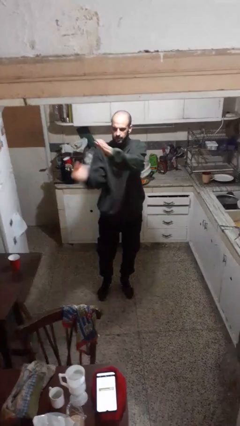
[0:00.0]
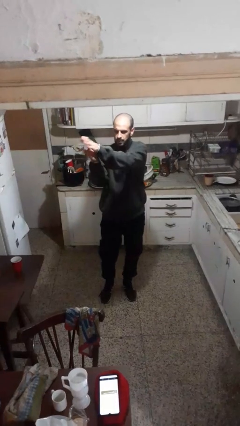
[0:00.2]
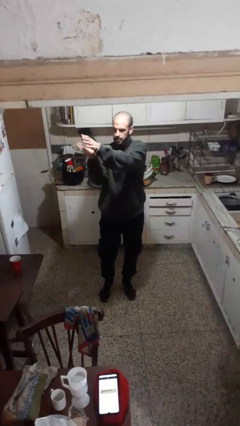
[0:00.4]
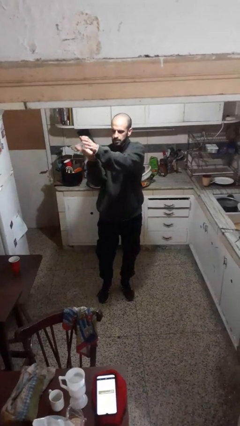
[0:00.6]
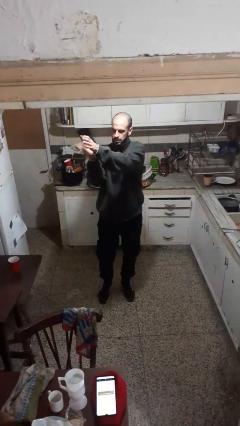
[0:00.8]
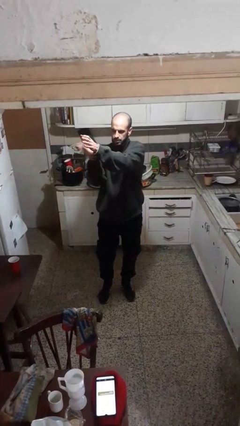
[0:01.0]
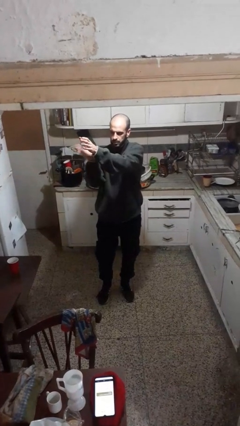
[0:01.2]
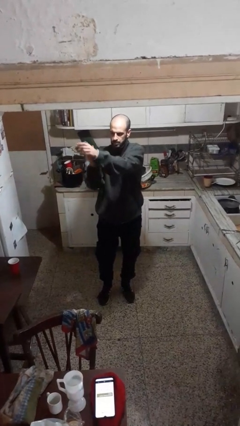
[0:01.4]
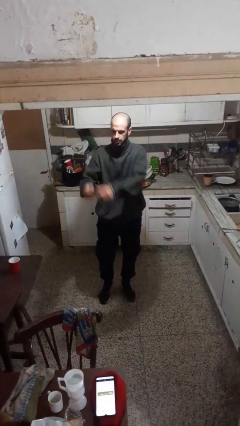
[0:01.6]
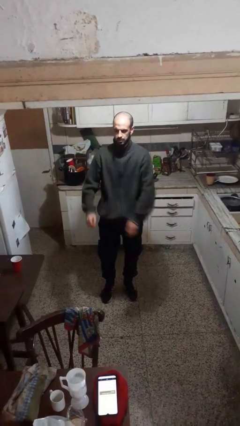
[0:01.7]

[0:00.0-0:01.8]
person claps hands

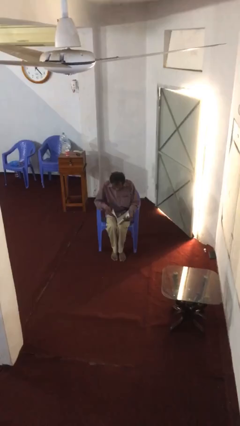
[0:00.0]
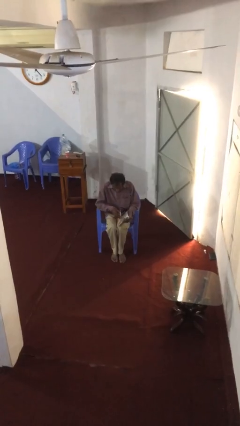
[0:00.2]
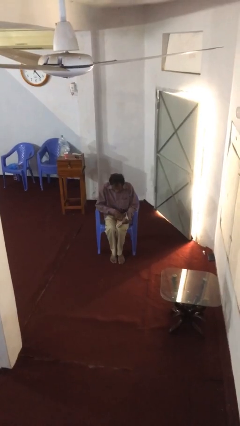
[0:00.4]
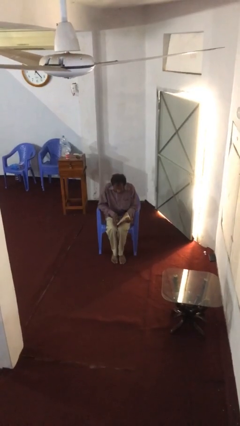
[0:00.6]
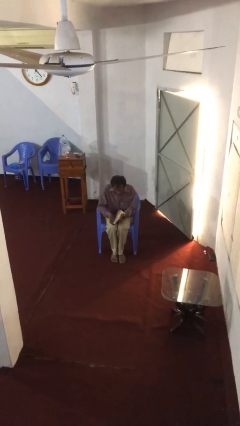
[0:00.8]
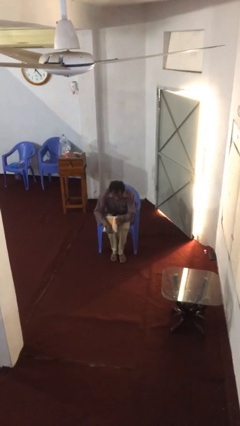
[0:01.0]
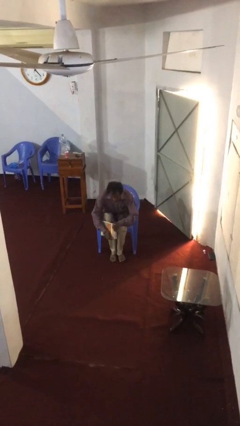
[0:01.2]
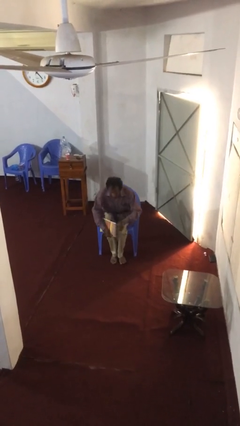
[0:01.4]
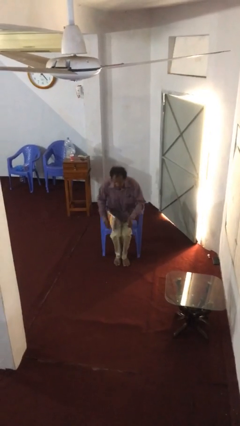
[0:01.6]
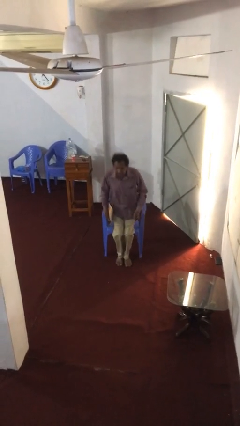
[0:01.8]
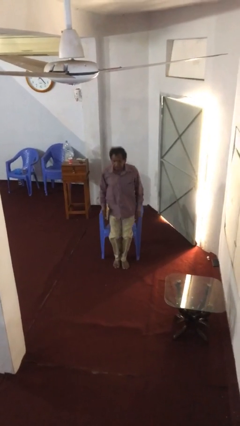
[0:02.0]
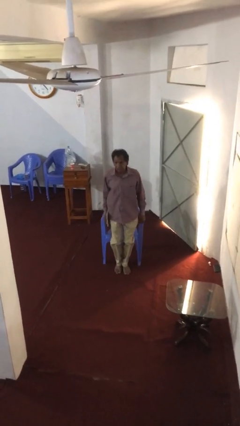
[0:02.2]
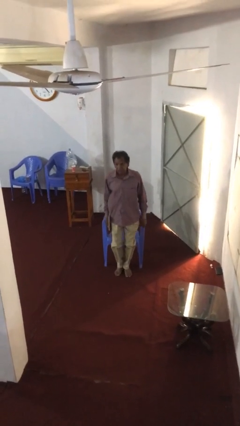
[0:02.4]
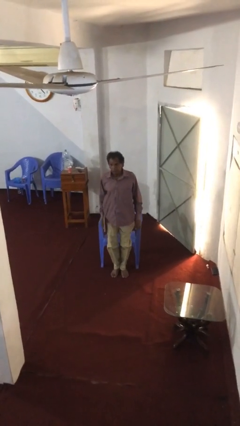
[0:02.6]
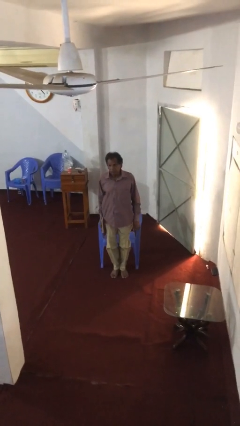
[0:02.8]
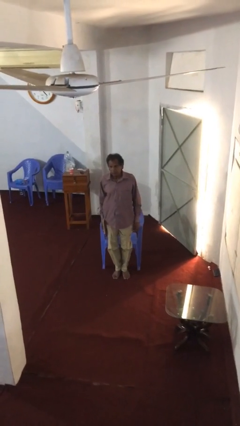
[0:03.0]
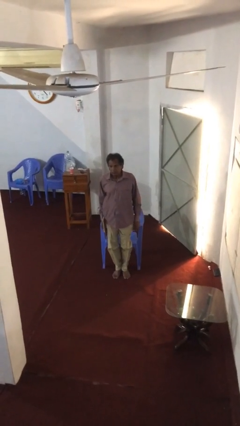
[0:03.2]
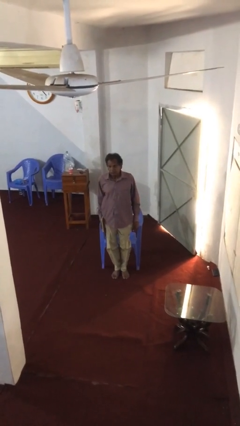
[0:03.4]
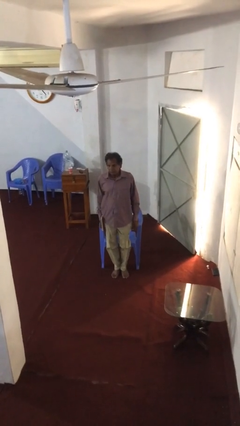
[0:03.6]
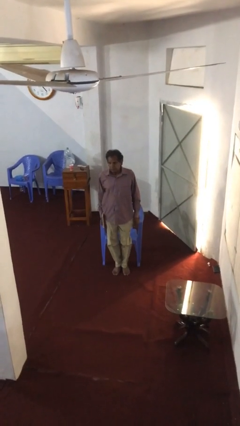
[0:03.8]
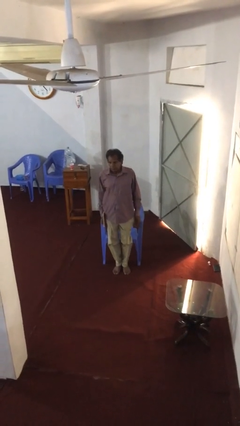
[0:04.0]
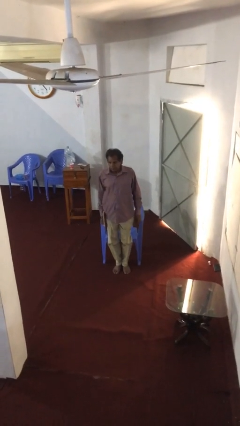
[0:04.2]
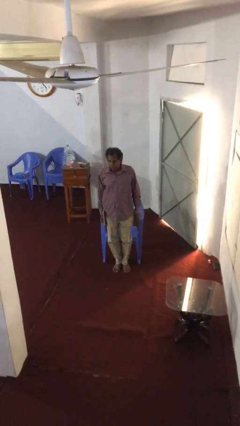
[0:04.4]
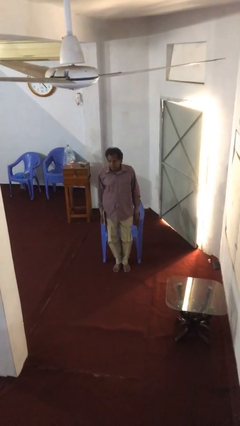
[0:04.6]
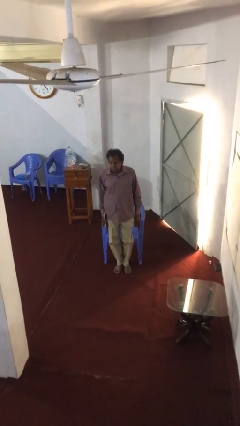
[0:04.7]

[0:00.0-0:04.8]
person stands up

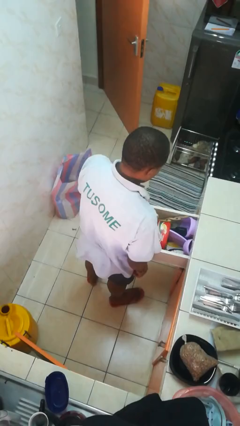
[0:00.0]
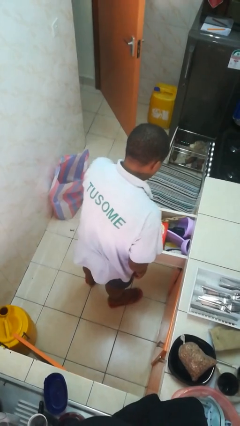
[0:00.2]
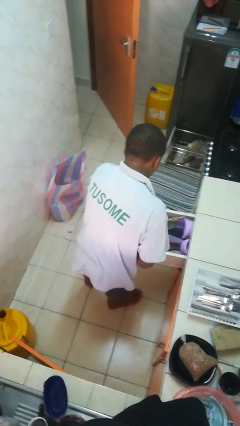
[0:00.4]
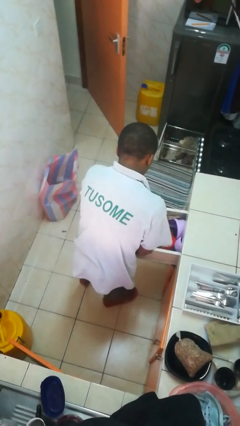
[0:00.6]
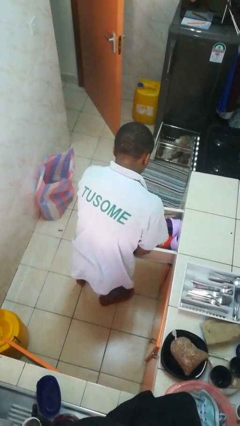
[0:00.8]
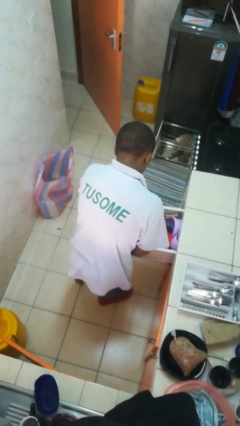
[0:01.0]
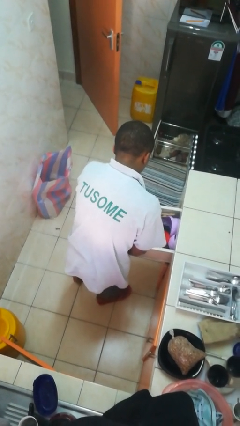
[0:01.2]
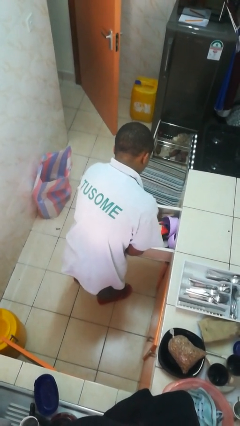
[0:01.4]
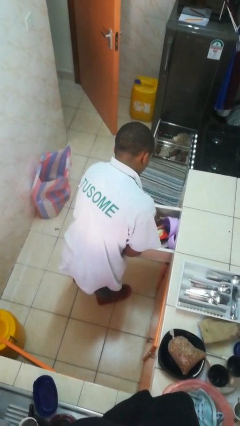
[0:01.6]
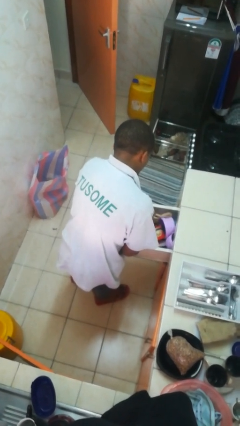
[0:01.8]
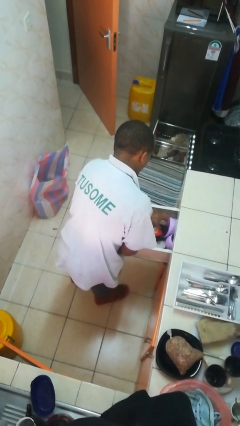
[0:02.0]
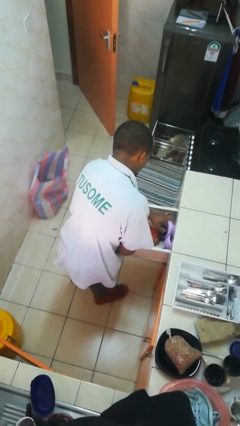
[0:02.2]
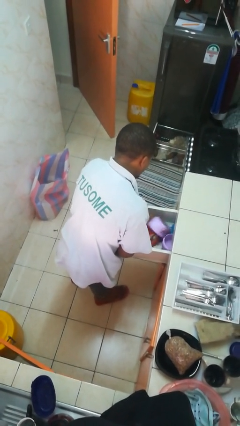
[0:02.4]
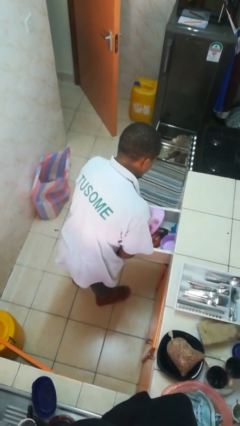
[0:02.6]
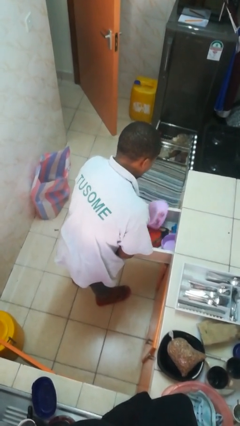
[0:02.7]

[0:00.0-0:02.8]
person searches in kitchen drawer

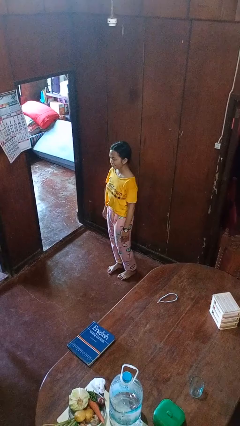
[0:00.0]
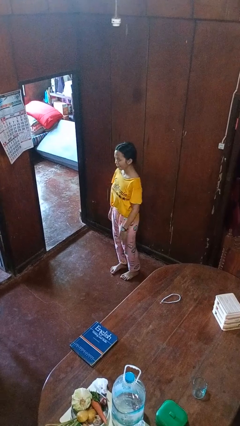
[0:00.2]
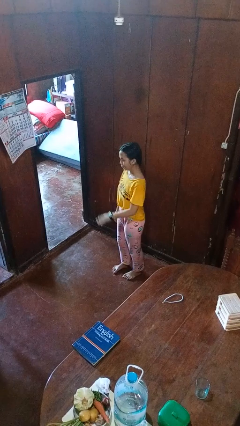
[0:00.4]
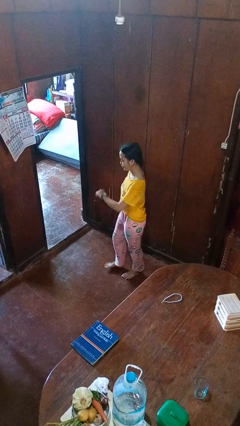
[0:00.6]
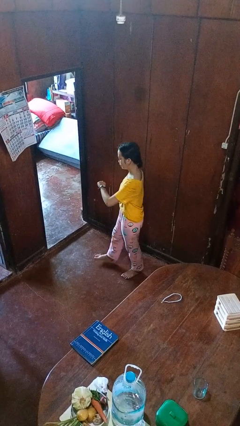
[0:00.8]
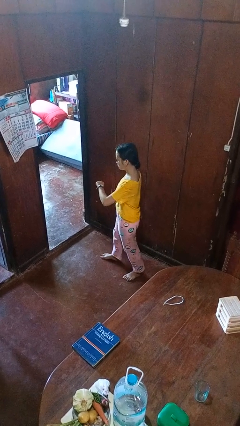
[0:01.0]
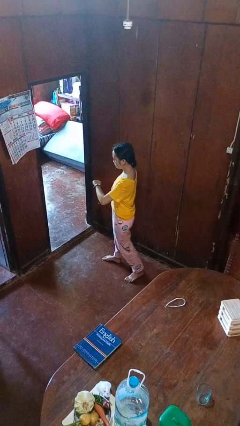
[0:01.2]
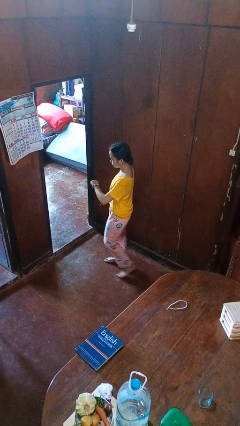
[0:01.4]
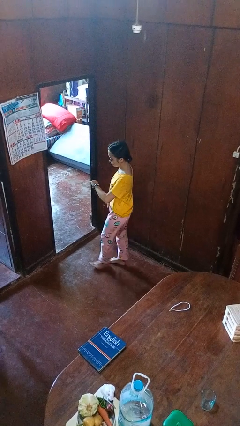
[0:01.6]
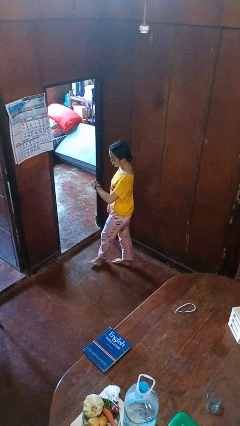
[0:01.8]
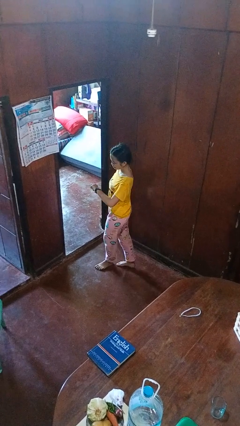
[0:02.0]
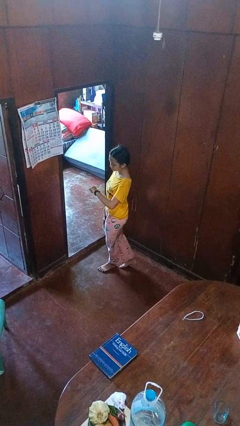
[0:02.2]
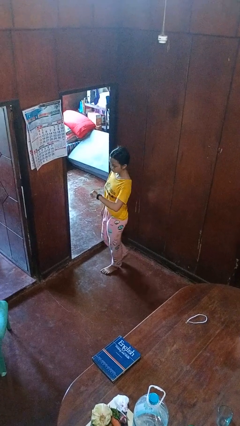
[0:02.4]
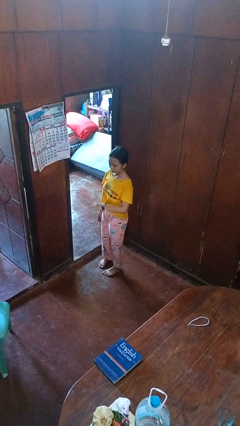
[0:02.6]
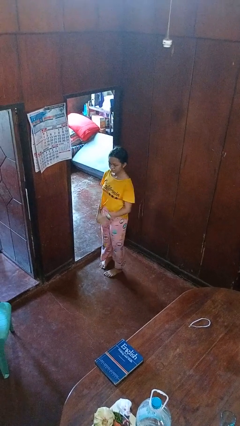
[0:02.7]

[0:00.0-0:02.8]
person looks at wristwatch

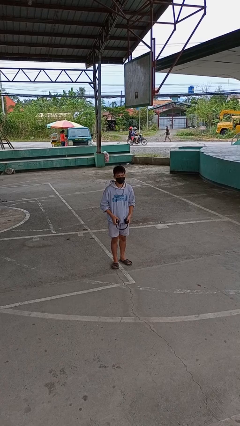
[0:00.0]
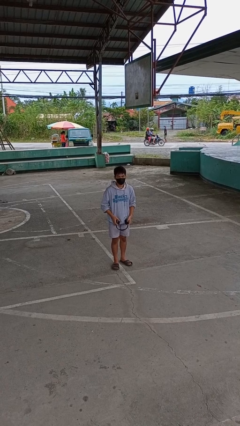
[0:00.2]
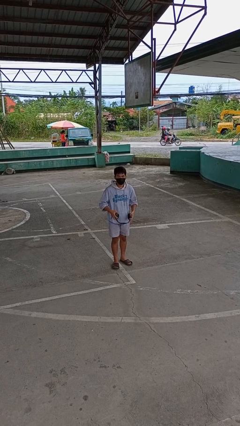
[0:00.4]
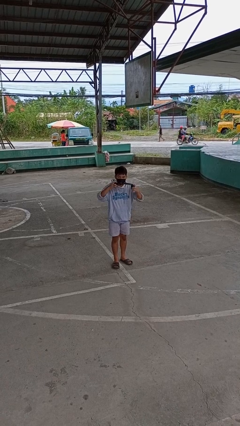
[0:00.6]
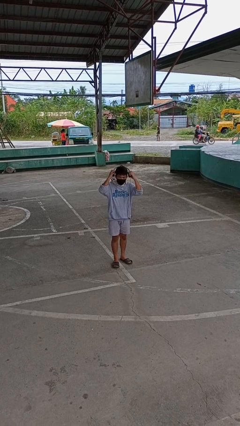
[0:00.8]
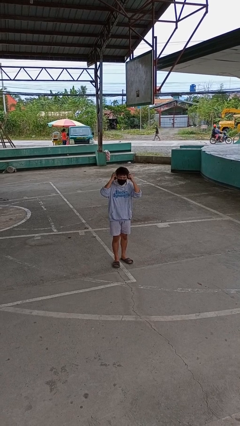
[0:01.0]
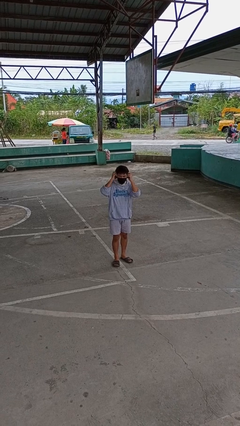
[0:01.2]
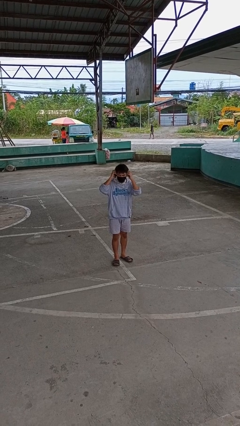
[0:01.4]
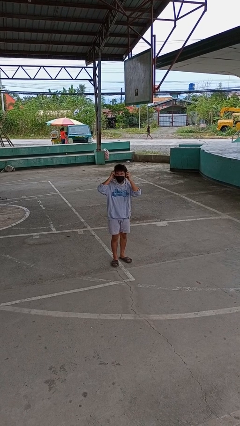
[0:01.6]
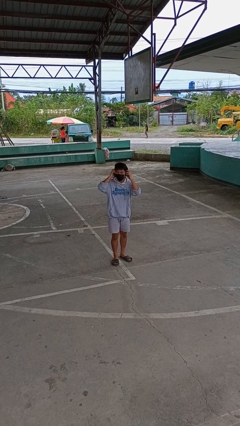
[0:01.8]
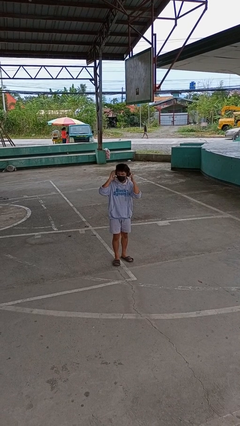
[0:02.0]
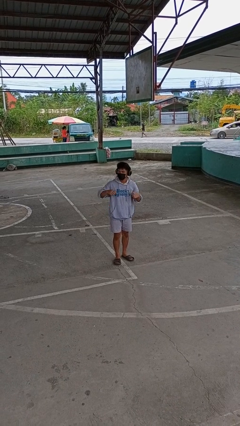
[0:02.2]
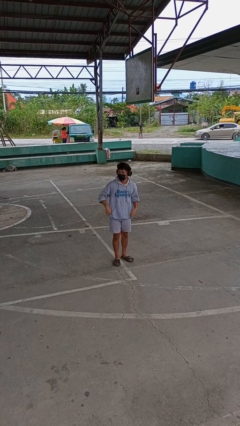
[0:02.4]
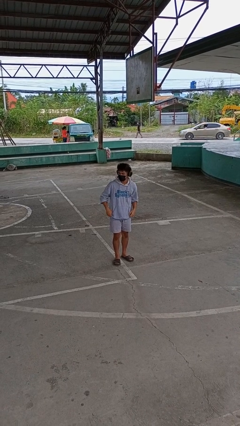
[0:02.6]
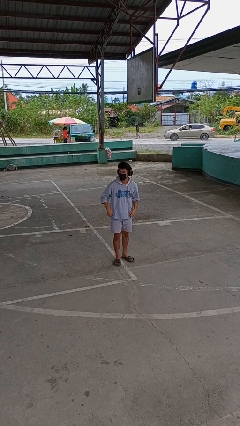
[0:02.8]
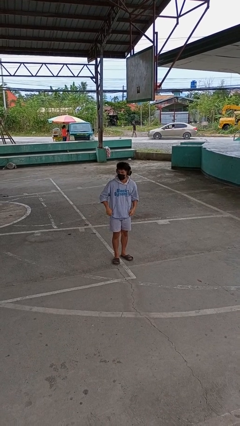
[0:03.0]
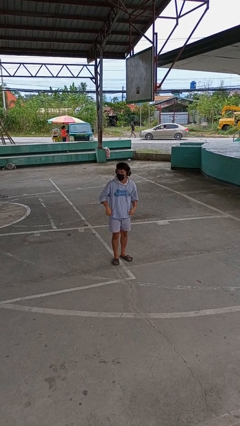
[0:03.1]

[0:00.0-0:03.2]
person puts on headphones

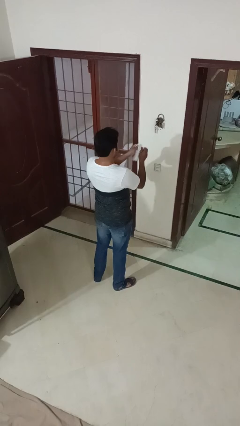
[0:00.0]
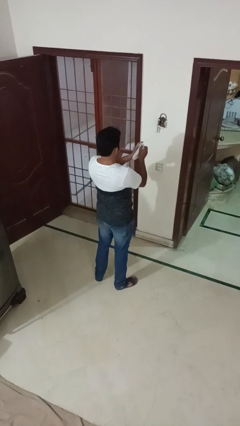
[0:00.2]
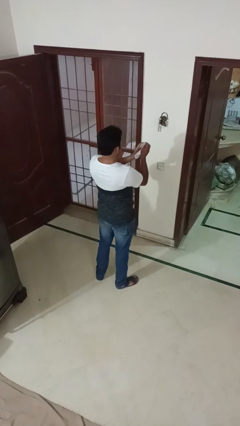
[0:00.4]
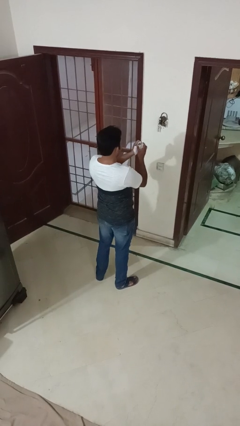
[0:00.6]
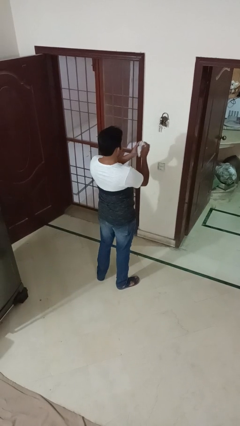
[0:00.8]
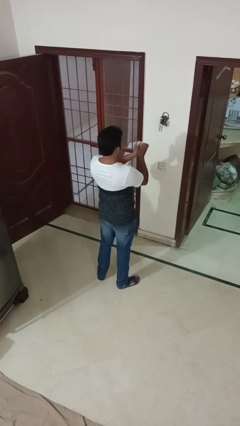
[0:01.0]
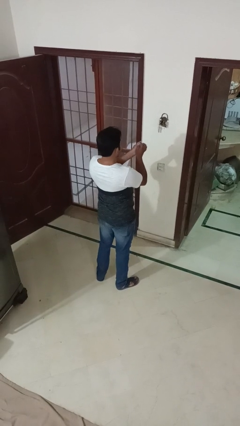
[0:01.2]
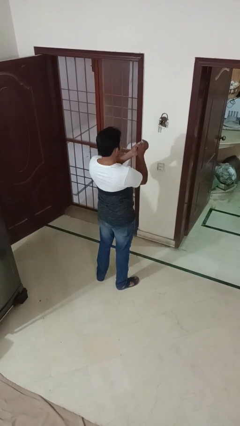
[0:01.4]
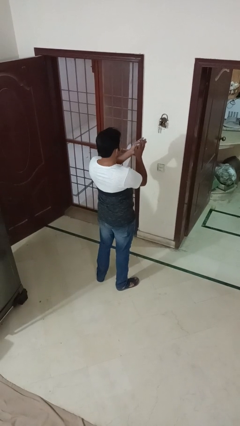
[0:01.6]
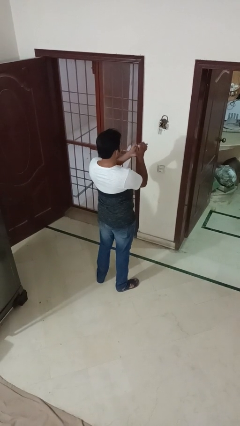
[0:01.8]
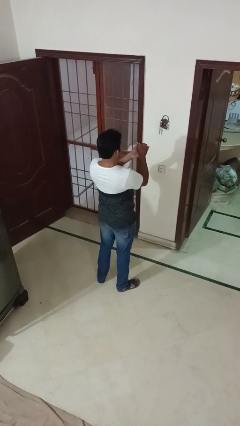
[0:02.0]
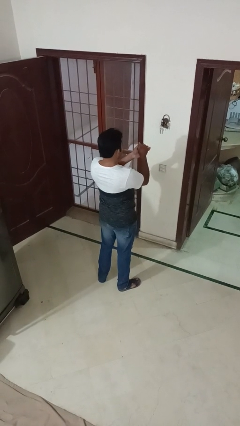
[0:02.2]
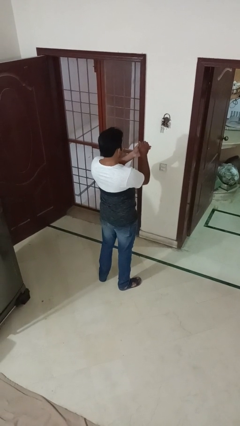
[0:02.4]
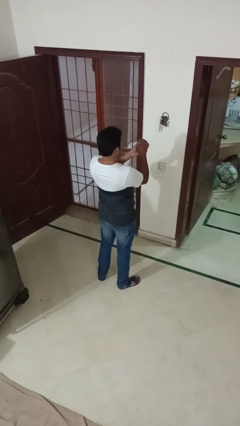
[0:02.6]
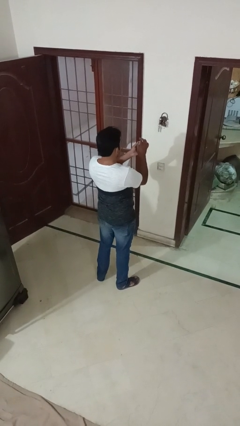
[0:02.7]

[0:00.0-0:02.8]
person crumples paper
